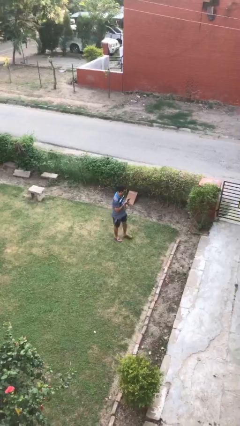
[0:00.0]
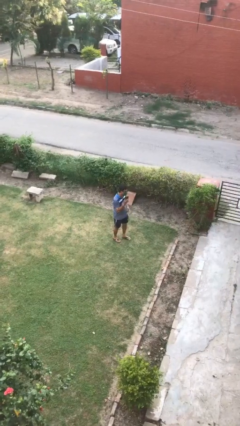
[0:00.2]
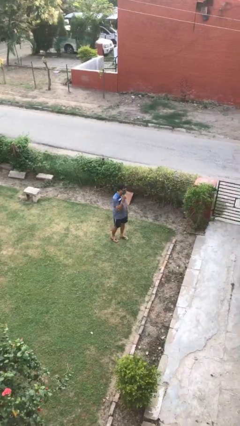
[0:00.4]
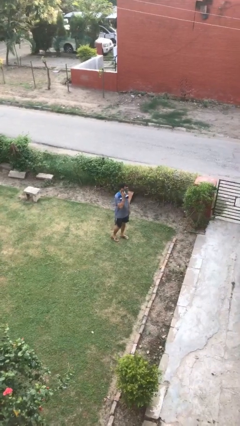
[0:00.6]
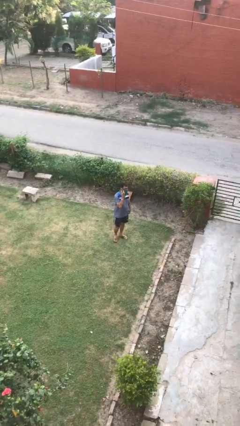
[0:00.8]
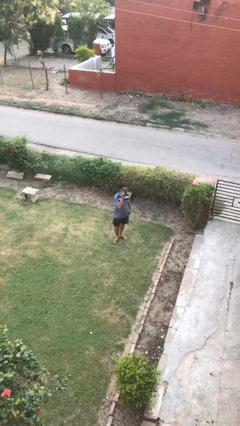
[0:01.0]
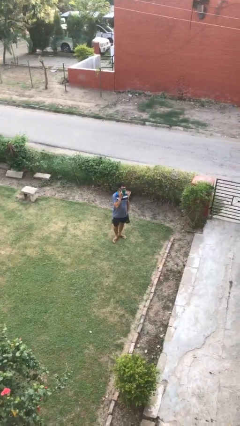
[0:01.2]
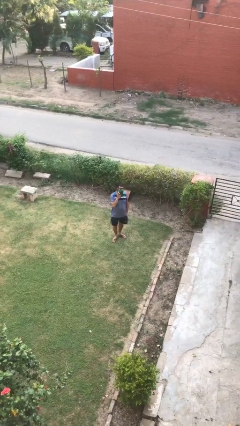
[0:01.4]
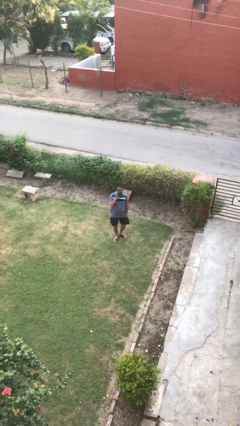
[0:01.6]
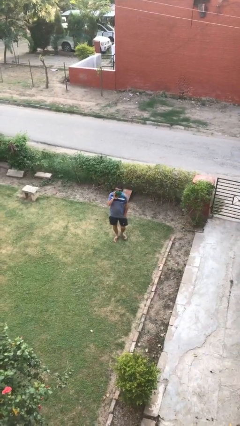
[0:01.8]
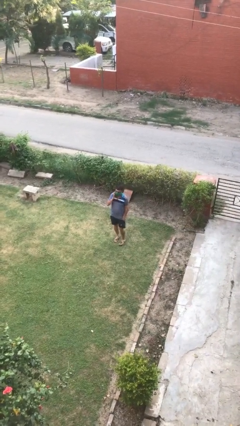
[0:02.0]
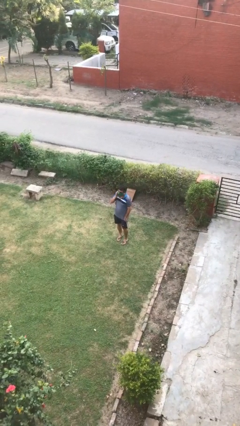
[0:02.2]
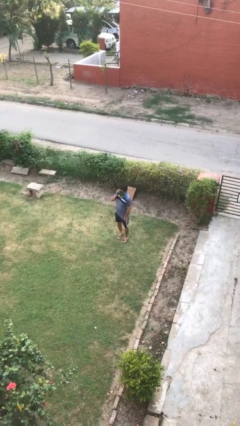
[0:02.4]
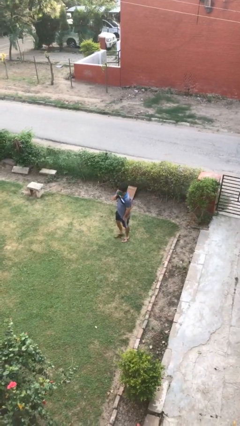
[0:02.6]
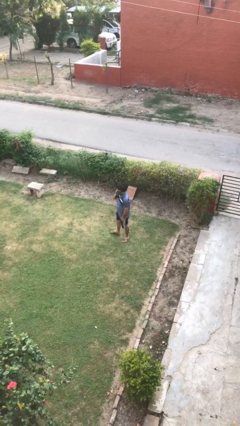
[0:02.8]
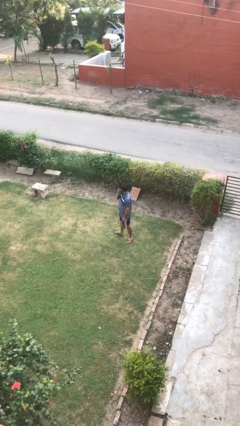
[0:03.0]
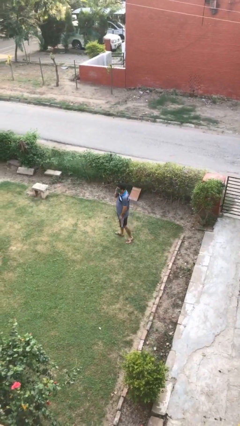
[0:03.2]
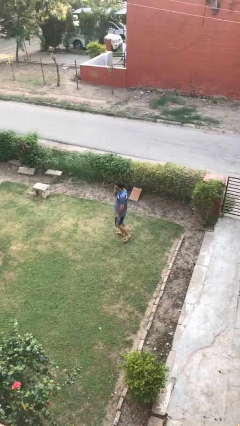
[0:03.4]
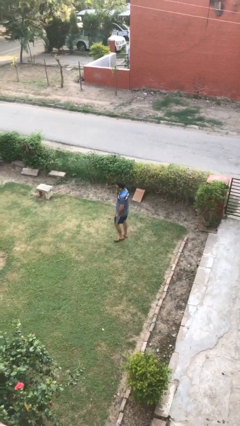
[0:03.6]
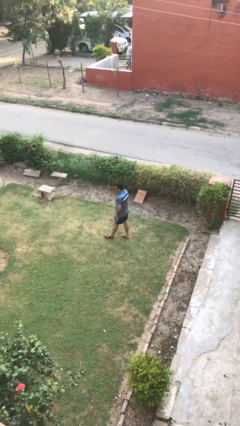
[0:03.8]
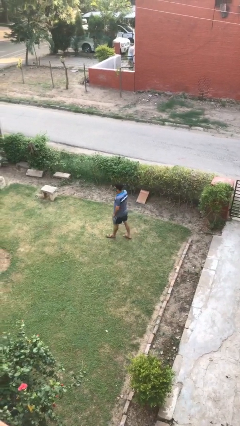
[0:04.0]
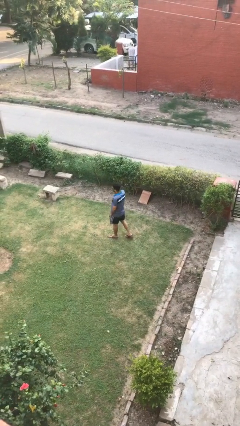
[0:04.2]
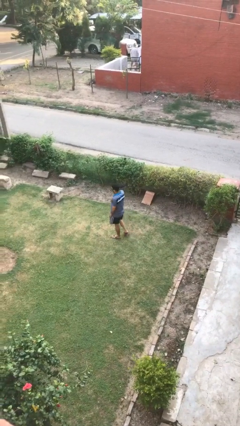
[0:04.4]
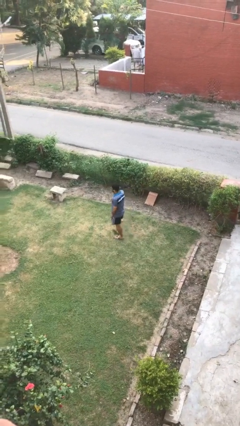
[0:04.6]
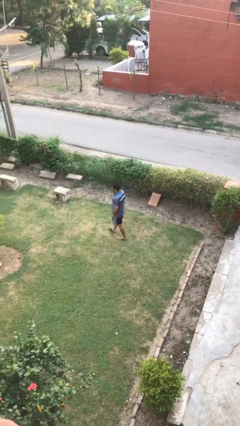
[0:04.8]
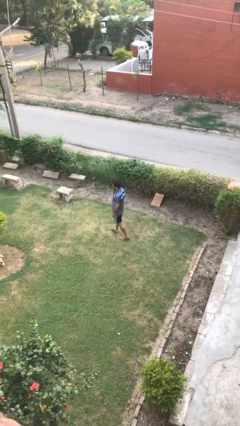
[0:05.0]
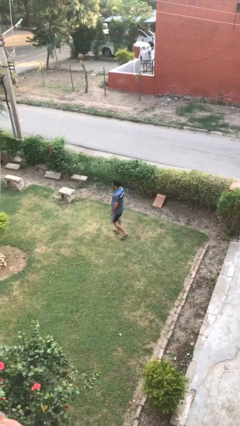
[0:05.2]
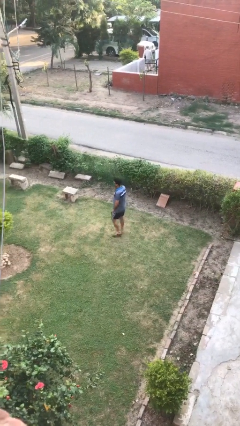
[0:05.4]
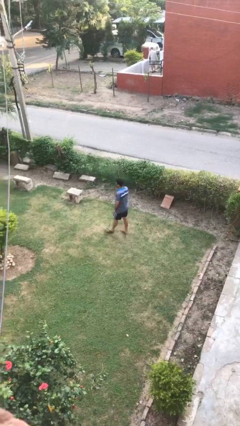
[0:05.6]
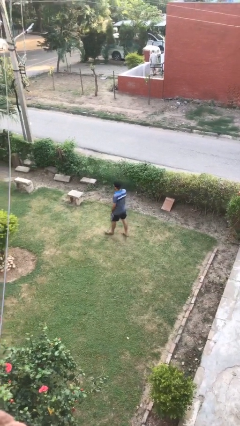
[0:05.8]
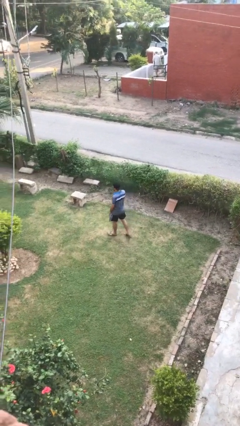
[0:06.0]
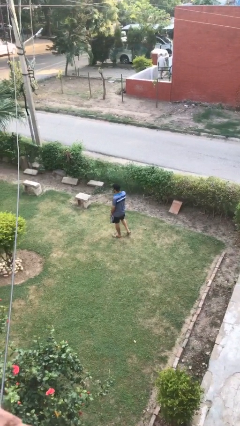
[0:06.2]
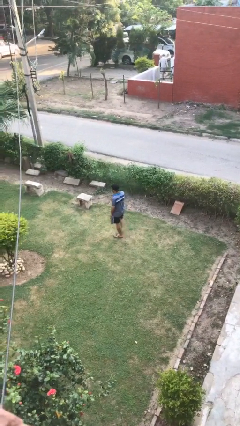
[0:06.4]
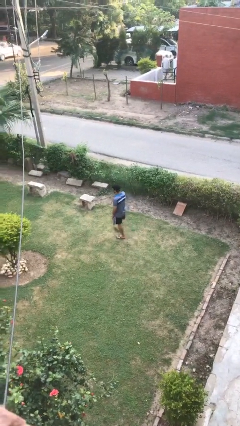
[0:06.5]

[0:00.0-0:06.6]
person talks on phone

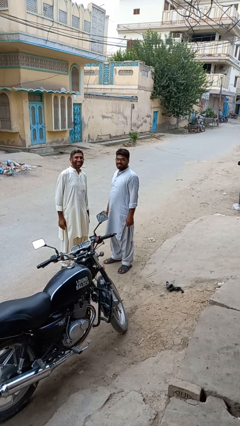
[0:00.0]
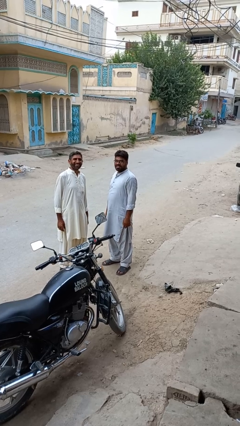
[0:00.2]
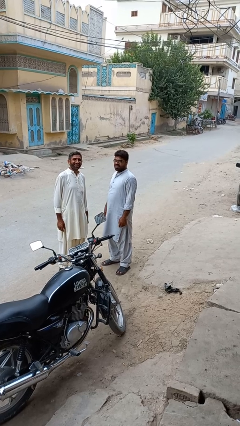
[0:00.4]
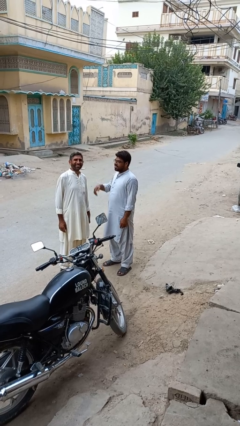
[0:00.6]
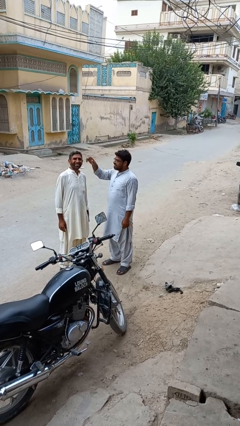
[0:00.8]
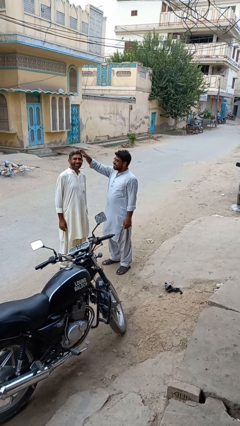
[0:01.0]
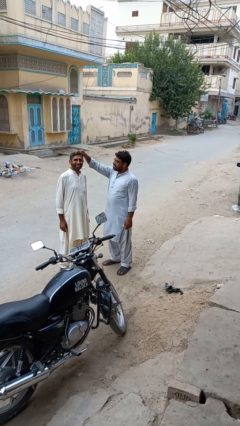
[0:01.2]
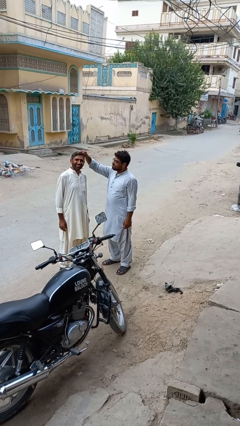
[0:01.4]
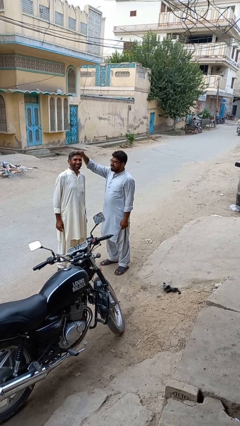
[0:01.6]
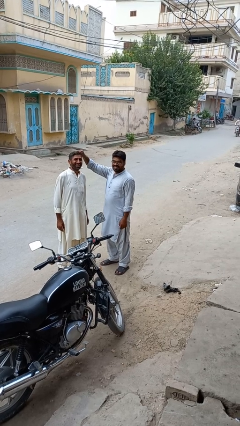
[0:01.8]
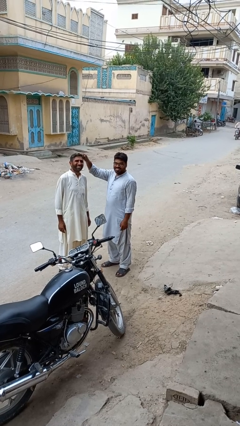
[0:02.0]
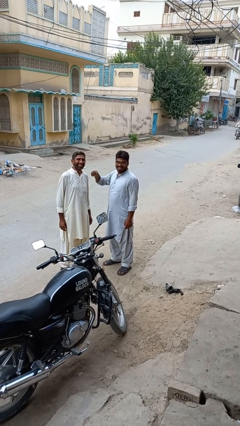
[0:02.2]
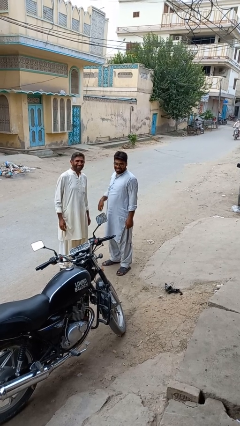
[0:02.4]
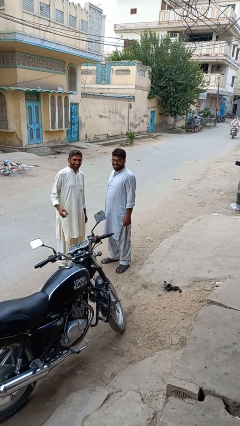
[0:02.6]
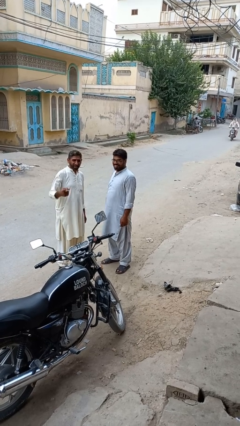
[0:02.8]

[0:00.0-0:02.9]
person grabs person by hair

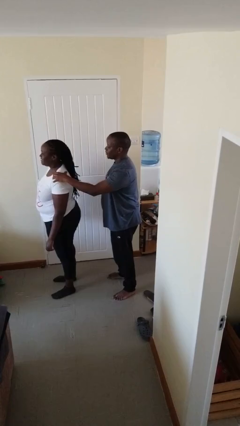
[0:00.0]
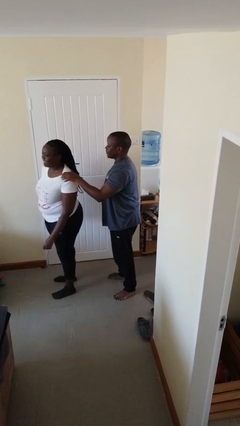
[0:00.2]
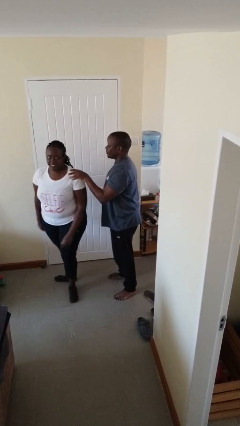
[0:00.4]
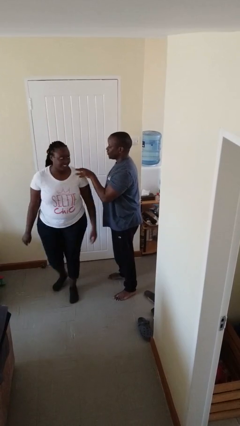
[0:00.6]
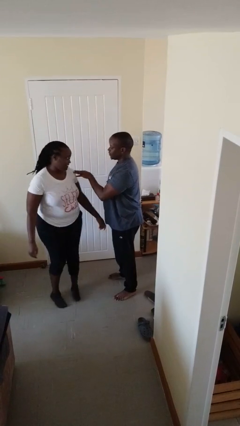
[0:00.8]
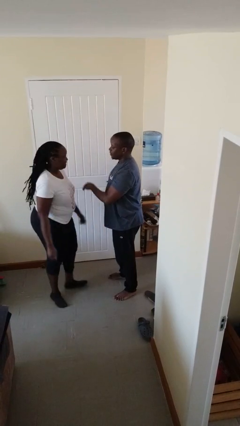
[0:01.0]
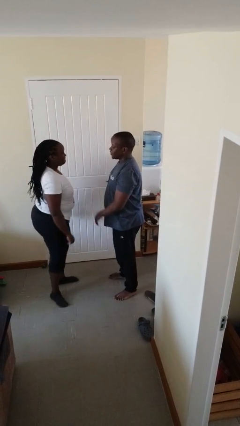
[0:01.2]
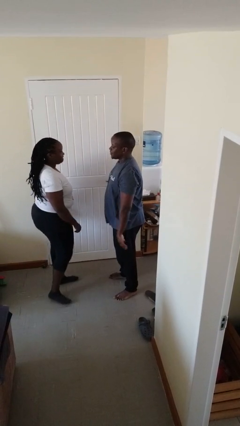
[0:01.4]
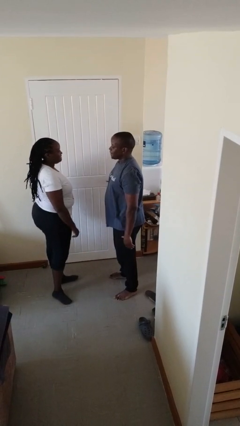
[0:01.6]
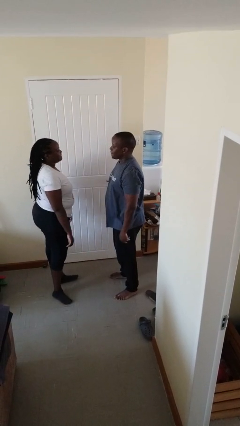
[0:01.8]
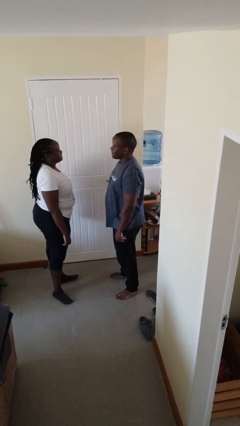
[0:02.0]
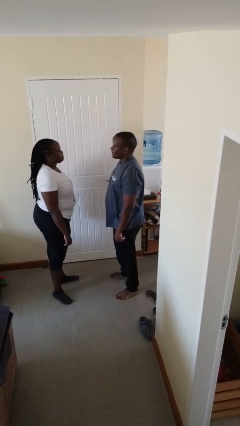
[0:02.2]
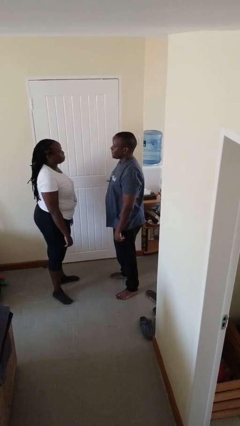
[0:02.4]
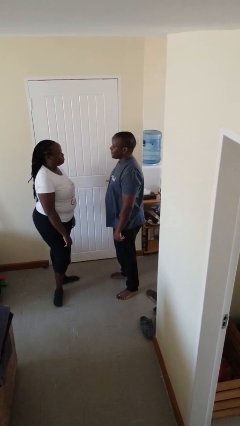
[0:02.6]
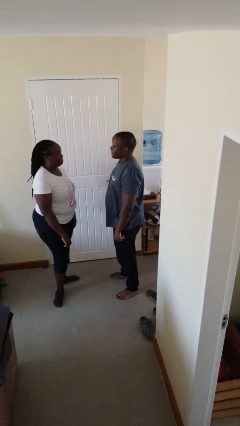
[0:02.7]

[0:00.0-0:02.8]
person spins person around

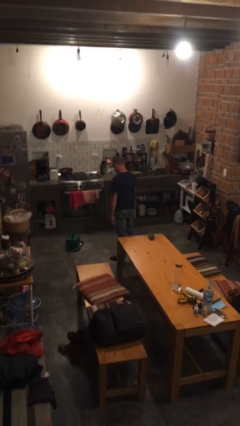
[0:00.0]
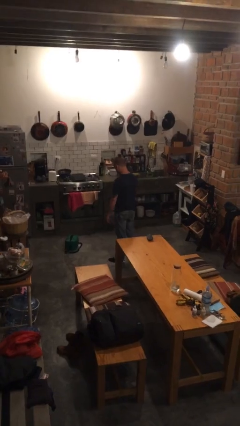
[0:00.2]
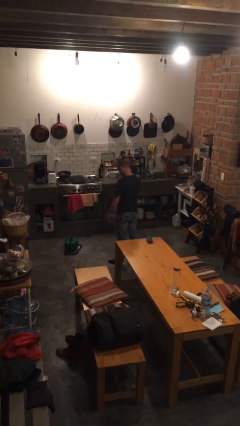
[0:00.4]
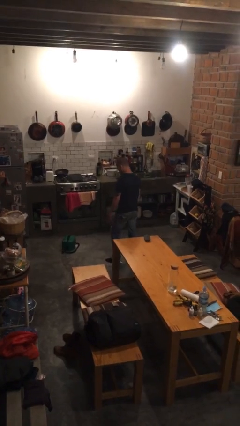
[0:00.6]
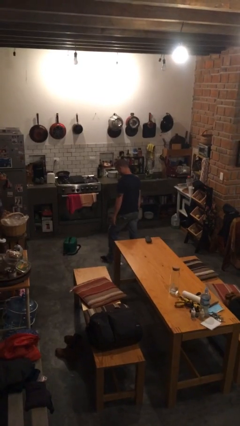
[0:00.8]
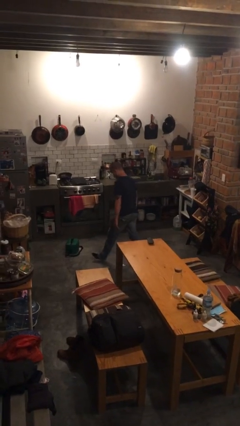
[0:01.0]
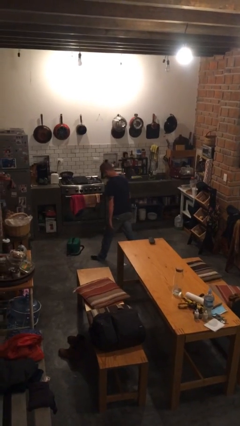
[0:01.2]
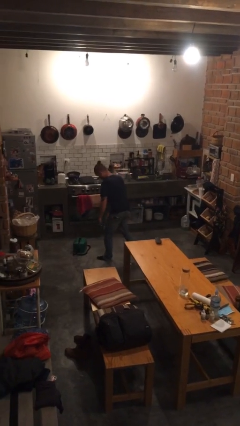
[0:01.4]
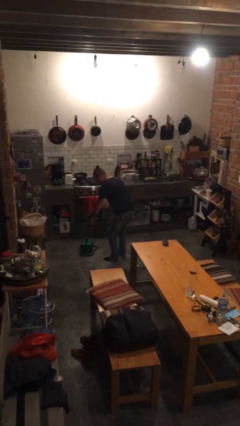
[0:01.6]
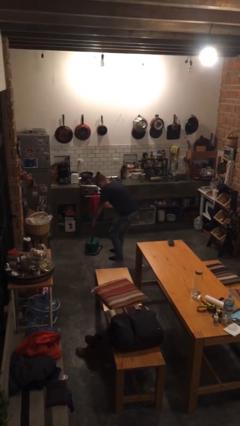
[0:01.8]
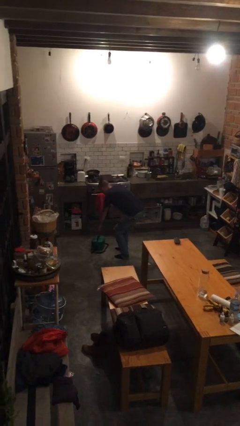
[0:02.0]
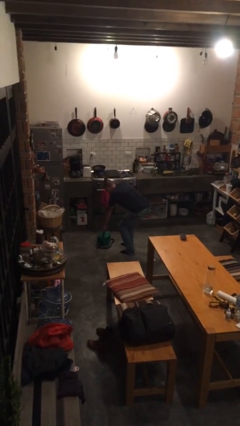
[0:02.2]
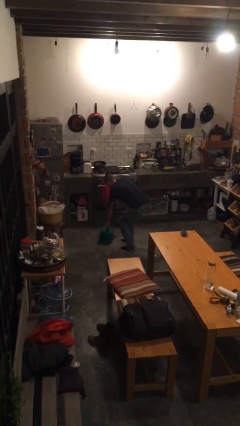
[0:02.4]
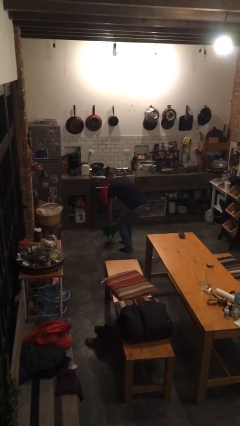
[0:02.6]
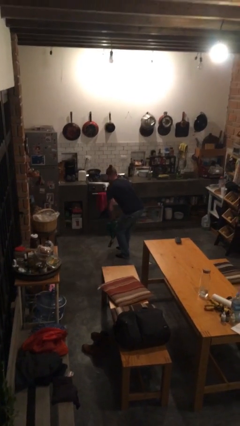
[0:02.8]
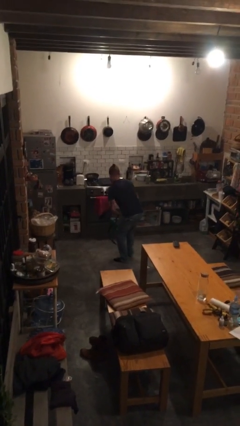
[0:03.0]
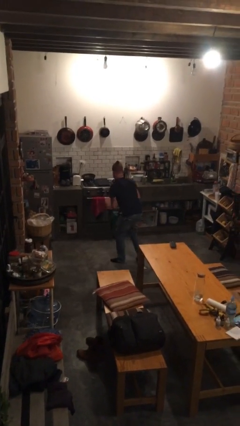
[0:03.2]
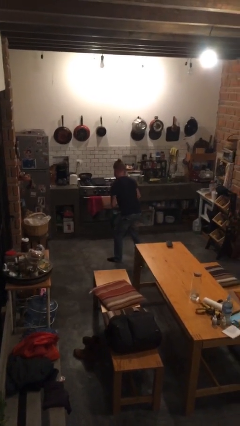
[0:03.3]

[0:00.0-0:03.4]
person picks up object from floor

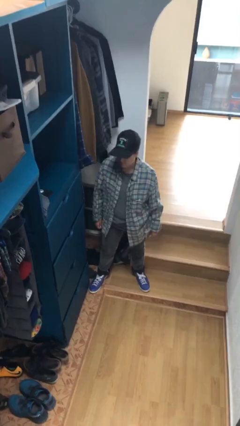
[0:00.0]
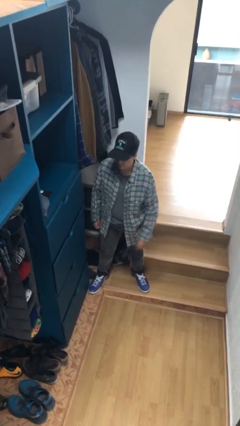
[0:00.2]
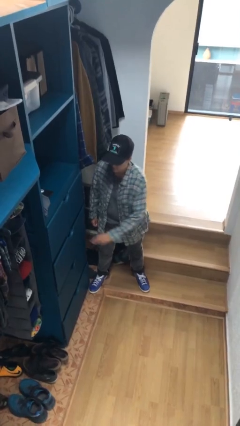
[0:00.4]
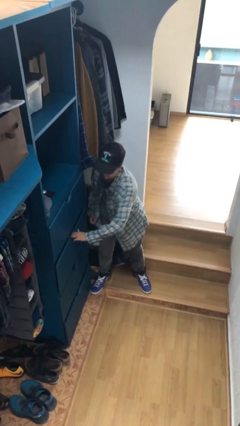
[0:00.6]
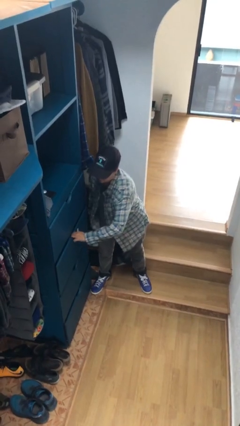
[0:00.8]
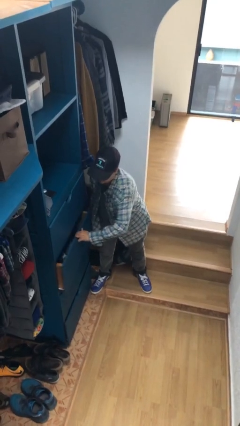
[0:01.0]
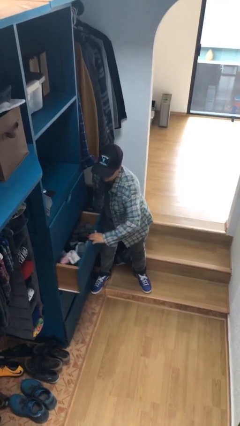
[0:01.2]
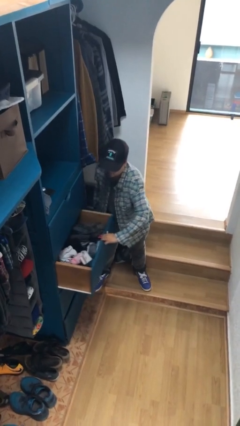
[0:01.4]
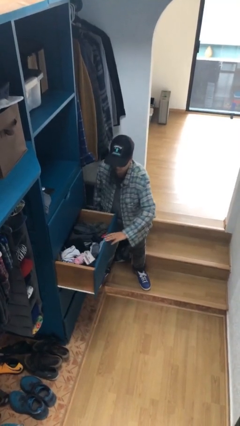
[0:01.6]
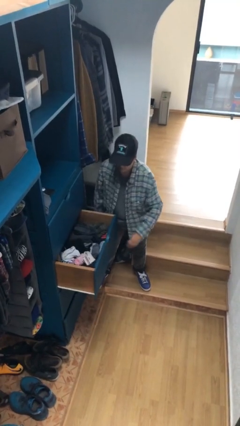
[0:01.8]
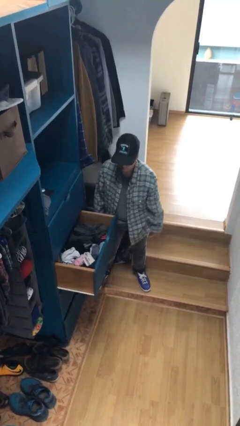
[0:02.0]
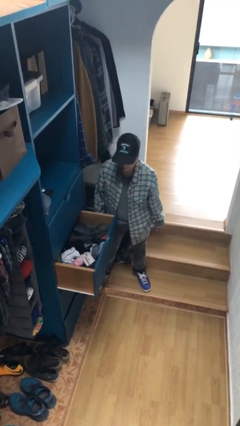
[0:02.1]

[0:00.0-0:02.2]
person opens dresser drawer
